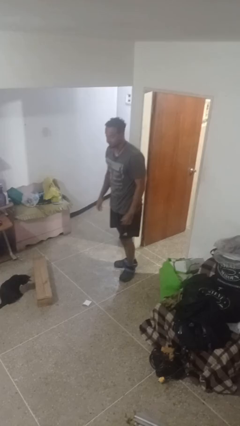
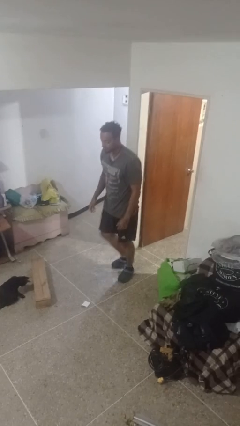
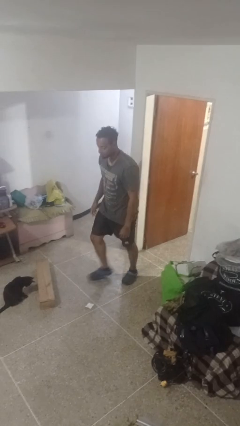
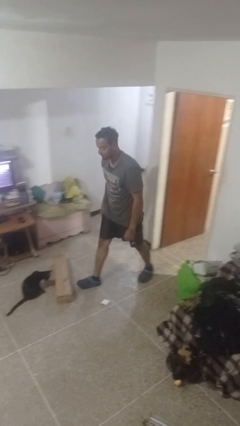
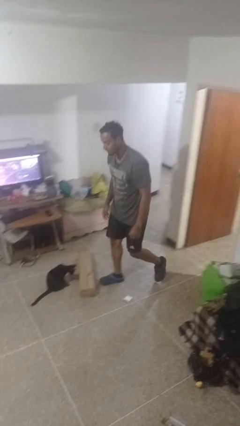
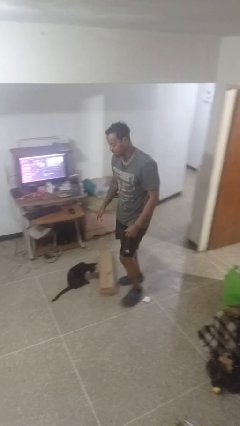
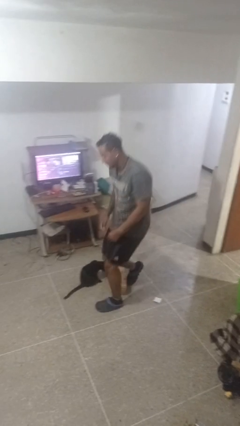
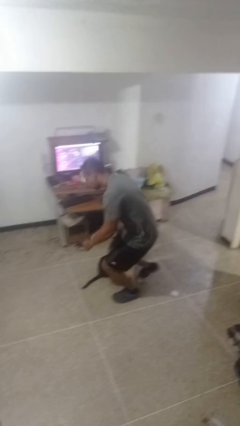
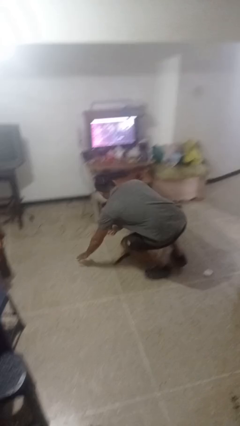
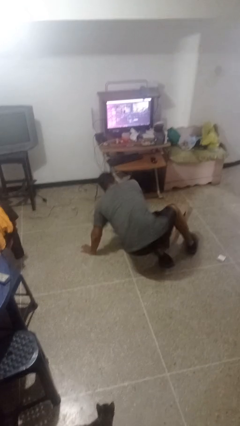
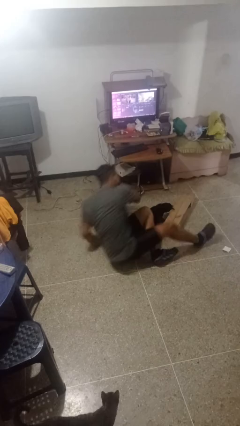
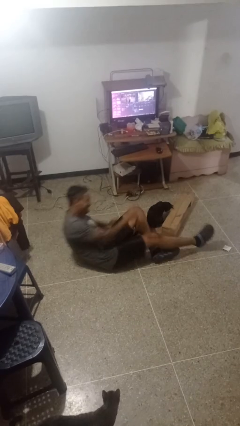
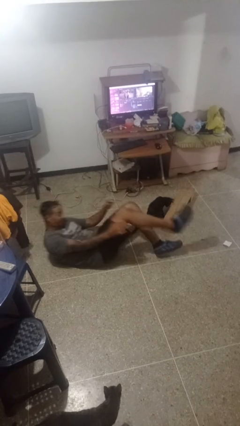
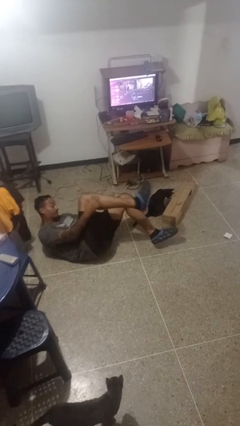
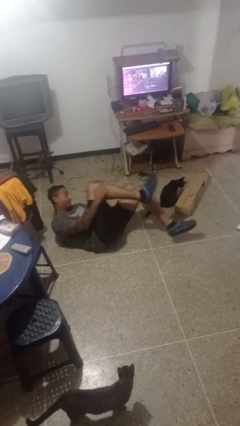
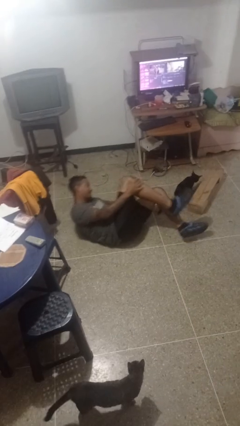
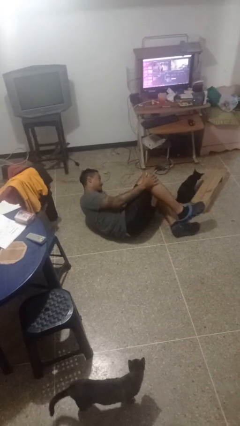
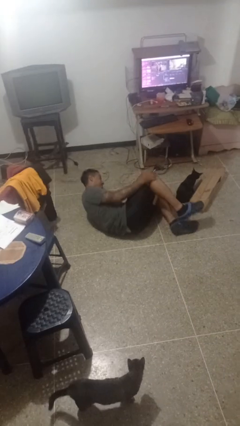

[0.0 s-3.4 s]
person trips on object on floor

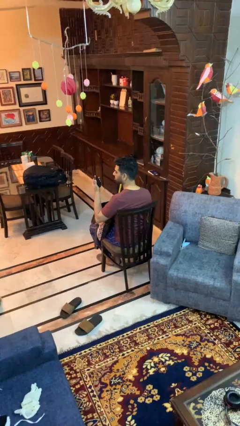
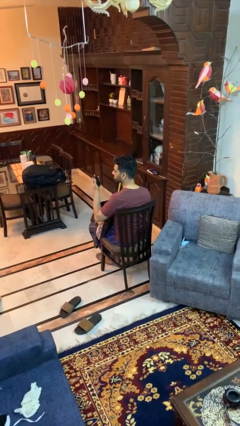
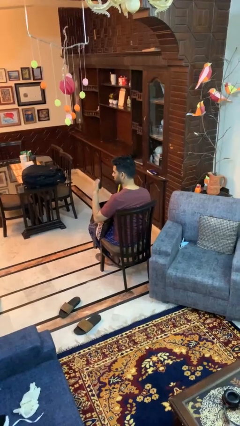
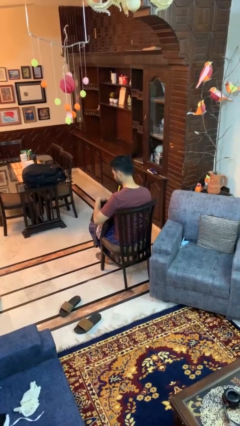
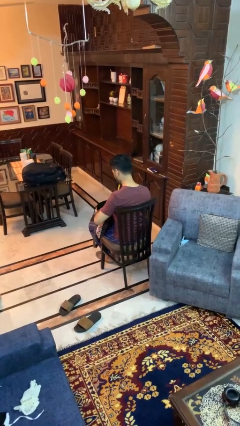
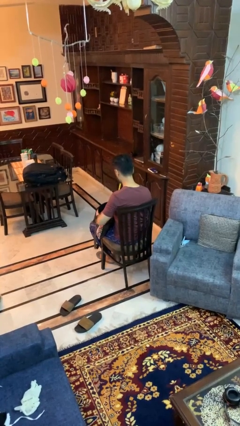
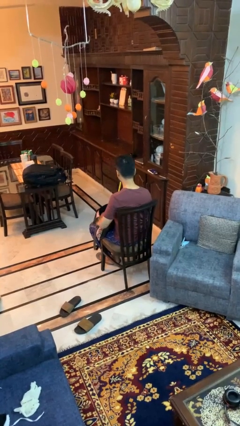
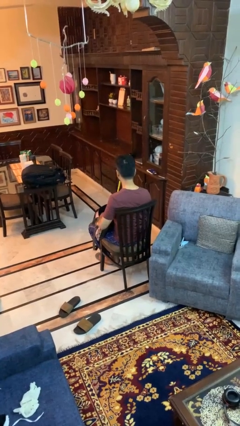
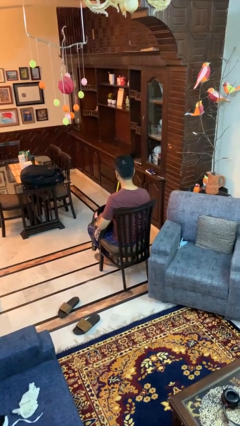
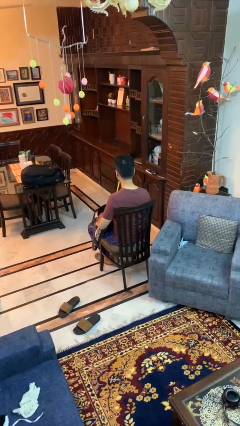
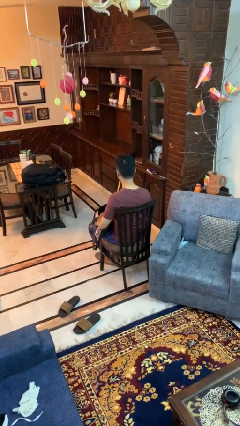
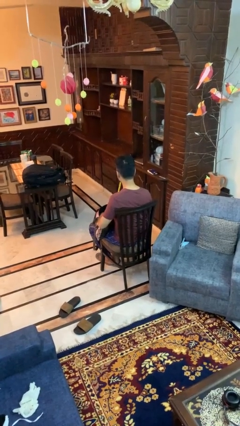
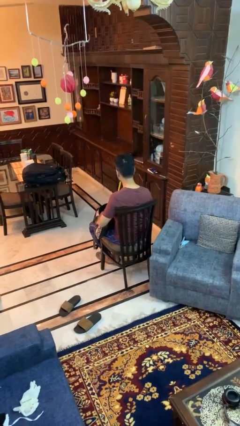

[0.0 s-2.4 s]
person puts object into purse

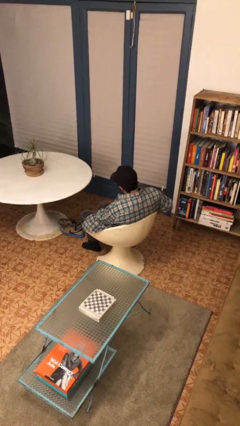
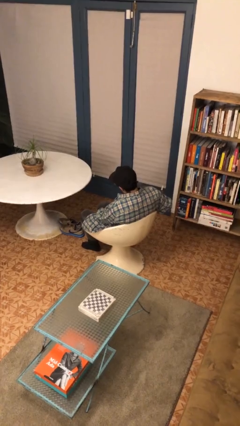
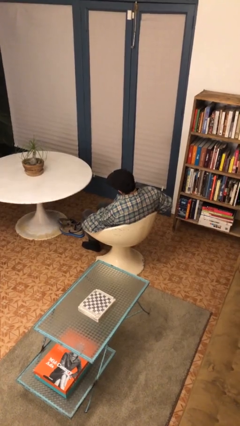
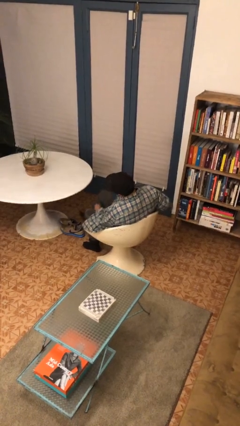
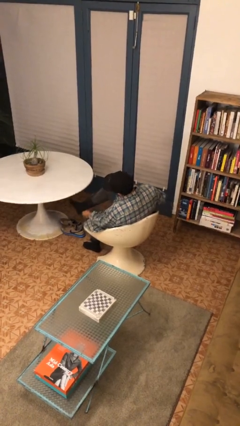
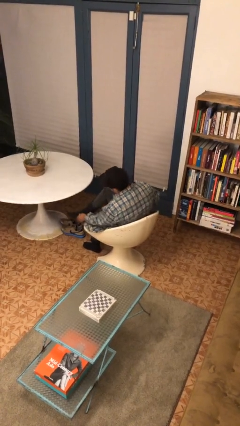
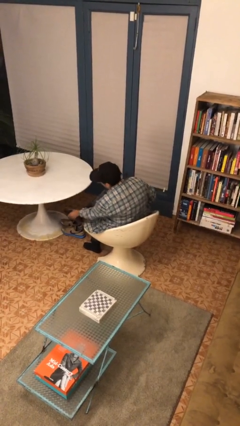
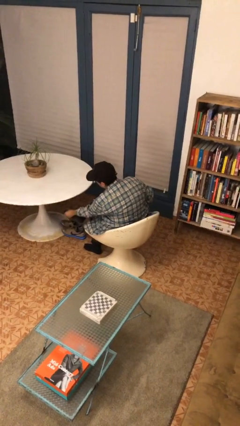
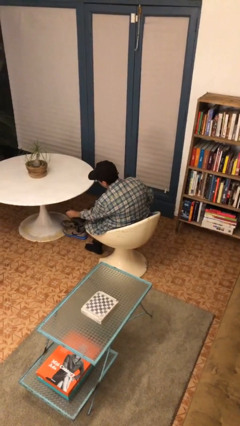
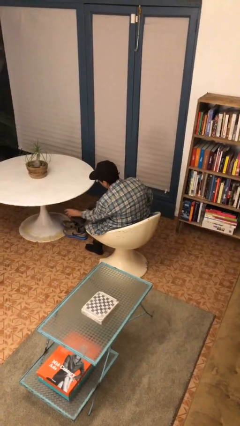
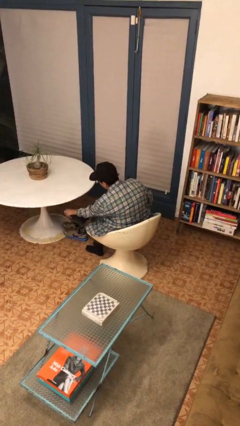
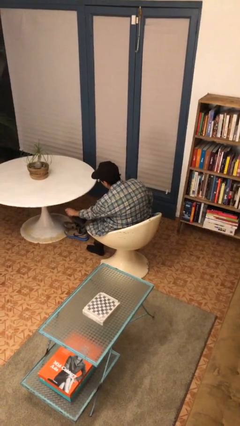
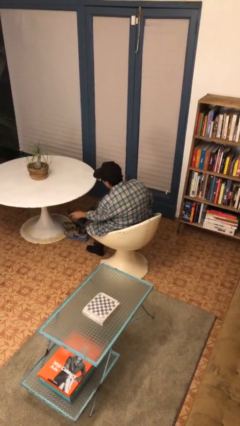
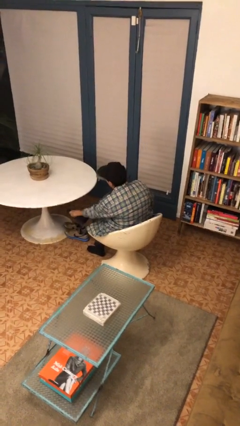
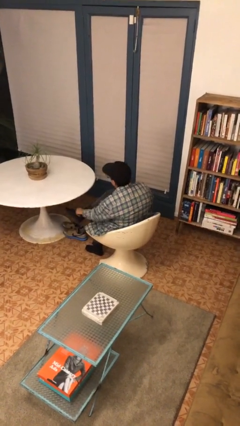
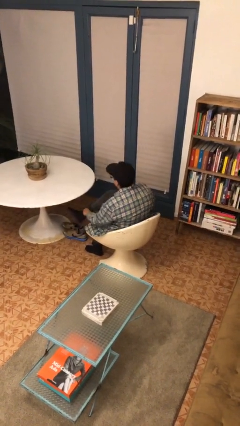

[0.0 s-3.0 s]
person rubs foot

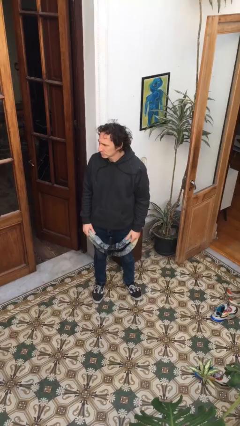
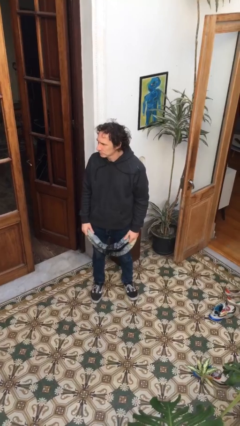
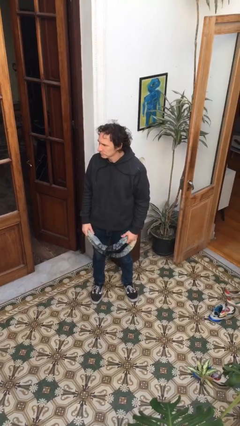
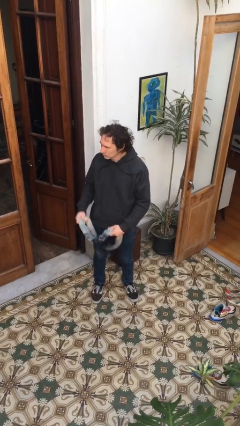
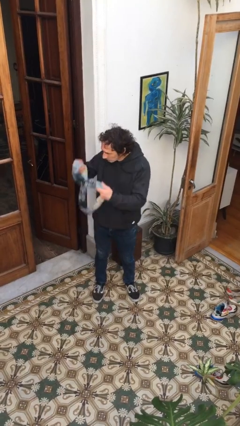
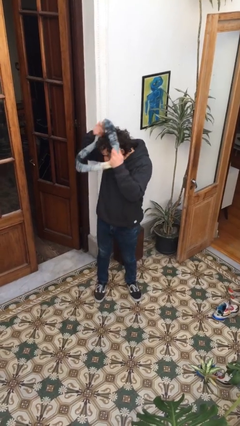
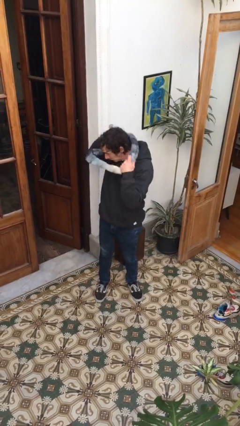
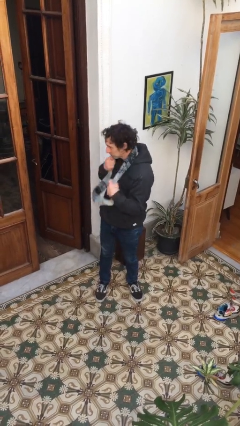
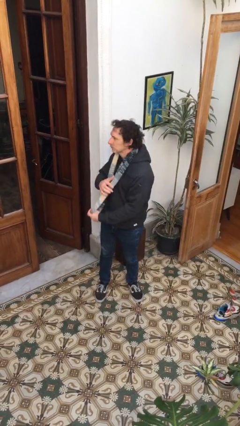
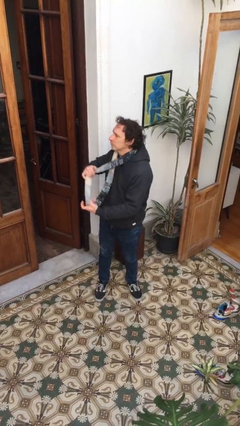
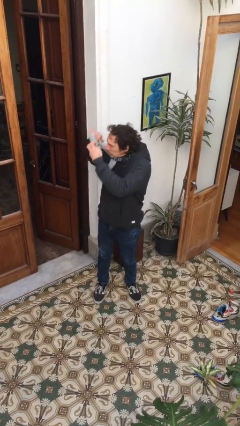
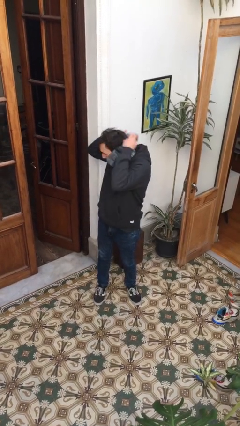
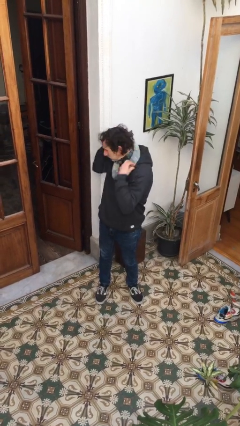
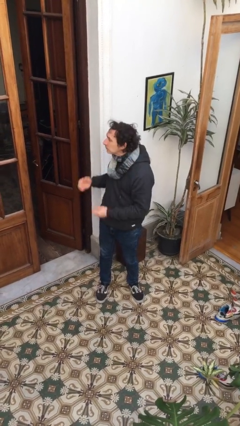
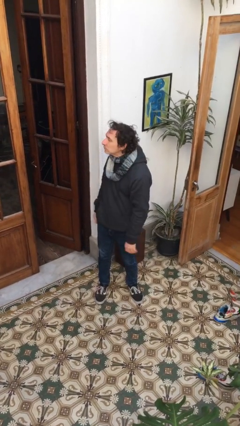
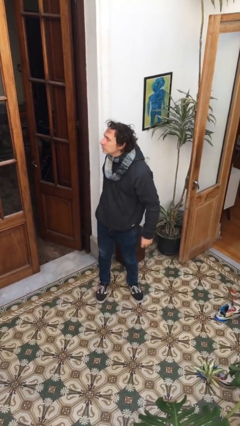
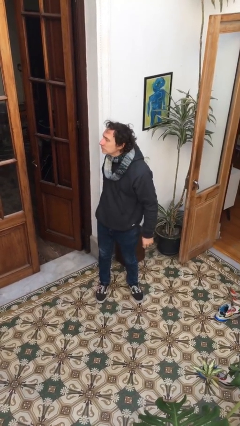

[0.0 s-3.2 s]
person puts on scarf

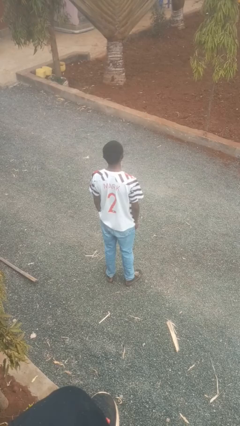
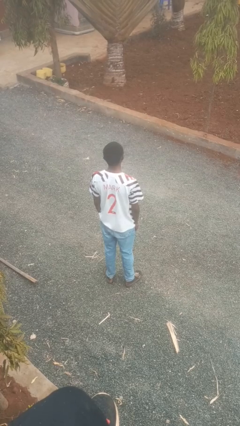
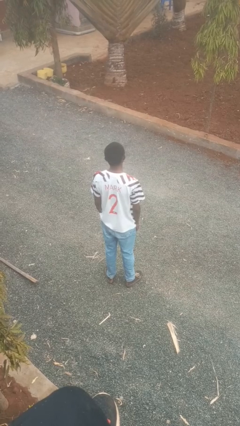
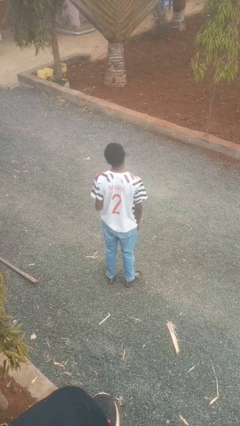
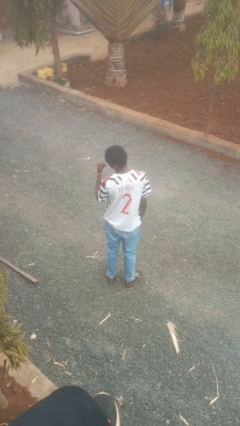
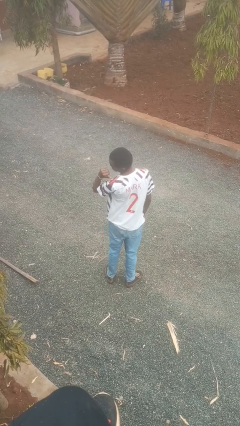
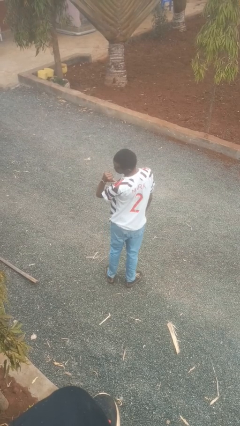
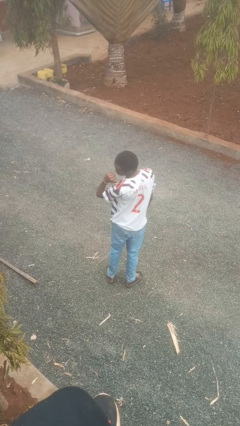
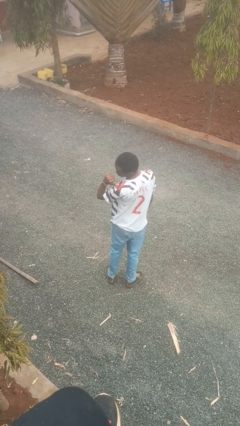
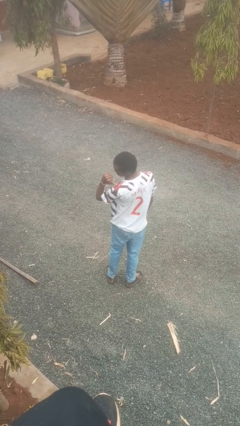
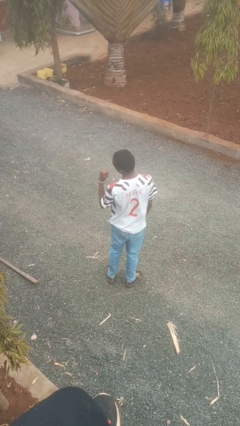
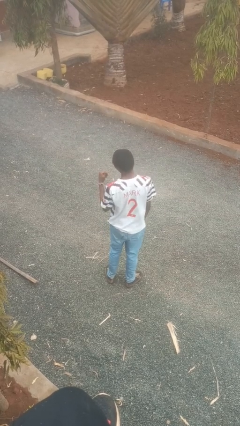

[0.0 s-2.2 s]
person gestures behind me

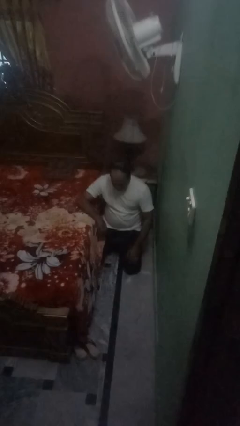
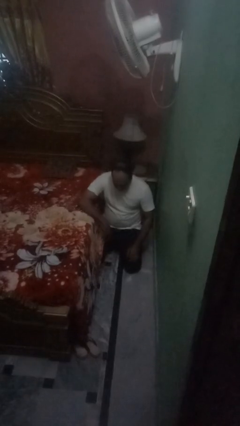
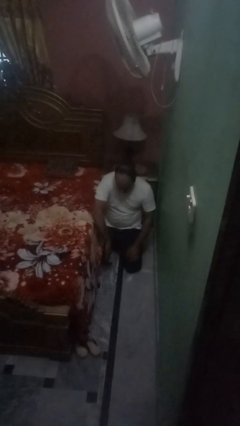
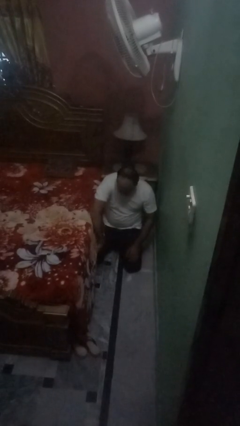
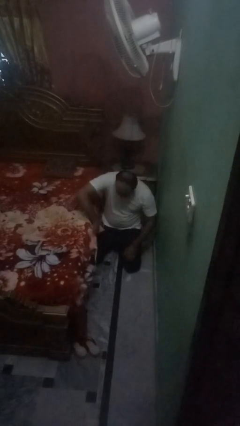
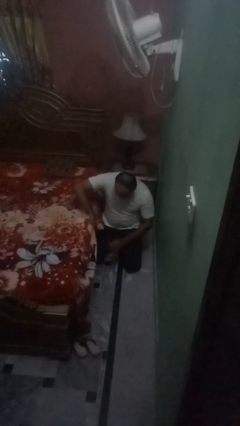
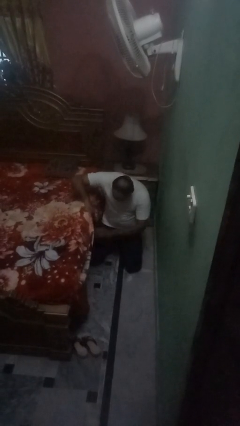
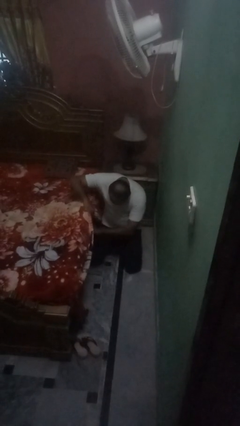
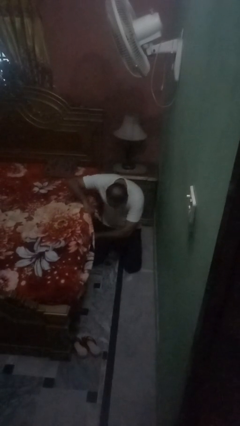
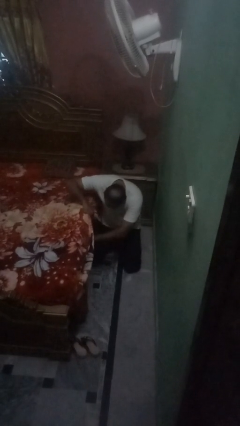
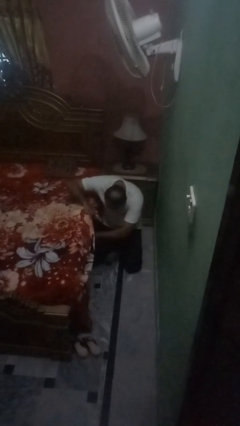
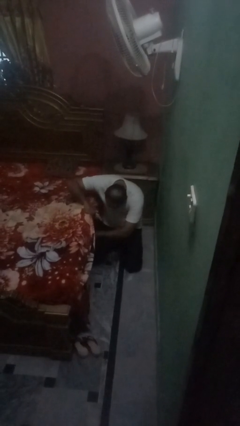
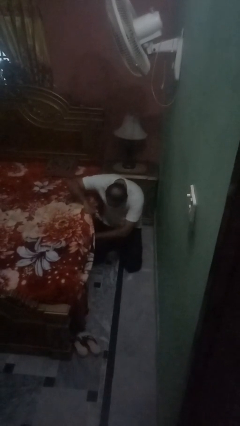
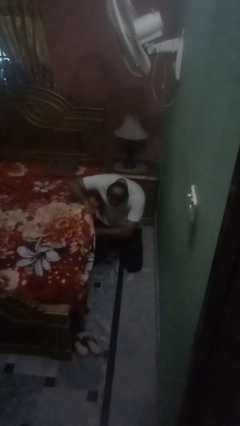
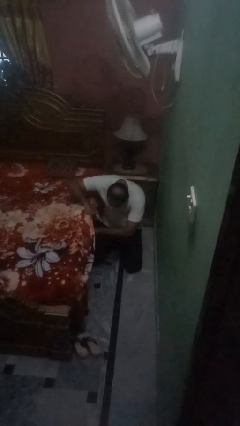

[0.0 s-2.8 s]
person searches under bed

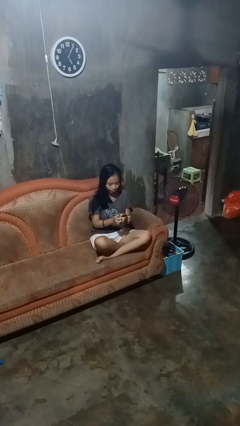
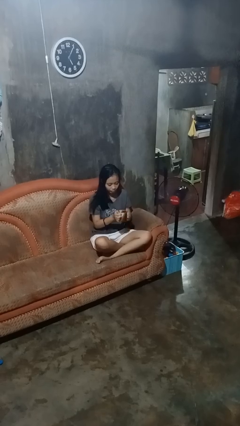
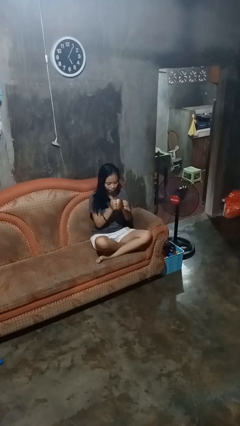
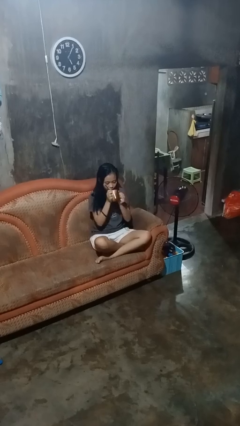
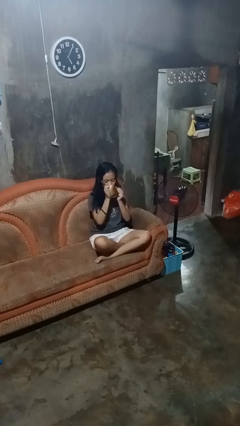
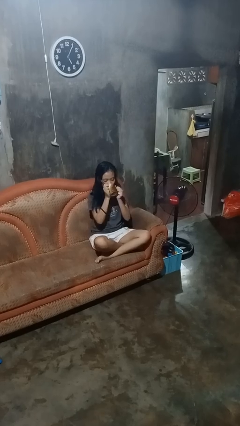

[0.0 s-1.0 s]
person drinks from mug
